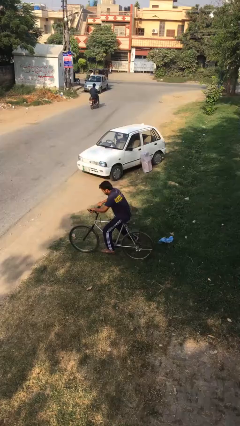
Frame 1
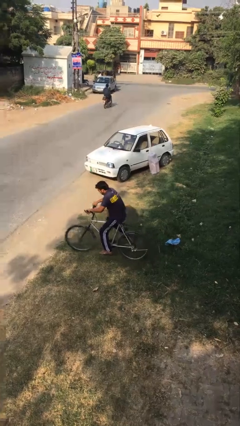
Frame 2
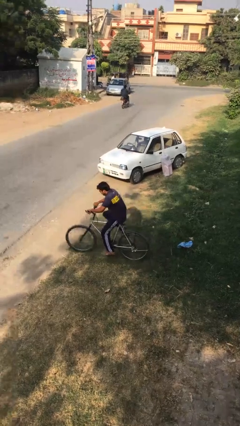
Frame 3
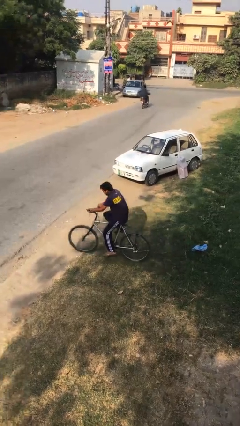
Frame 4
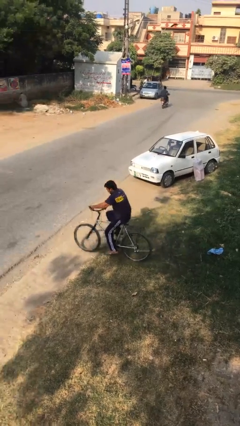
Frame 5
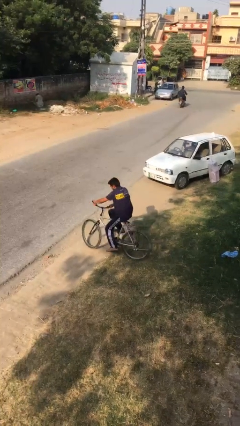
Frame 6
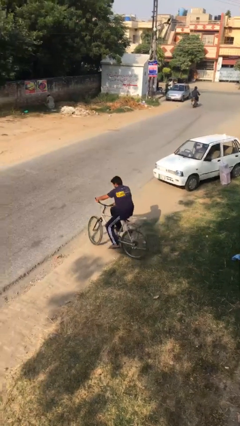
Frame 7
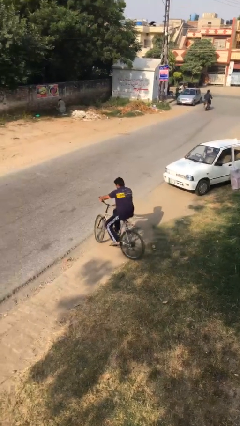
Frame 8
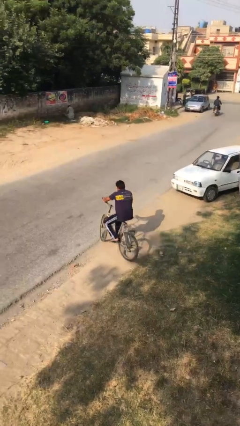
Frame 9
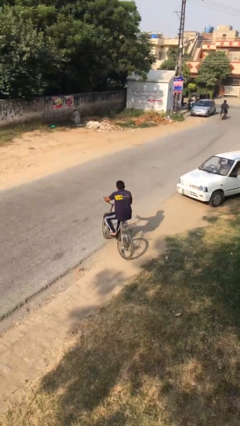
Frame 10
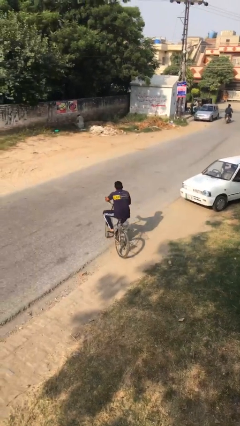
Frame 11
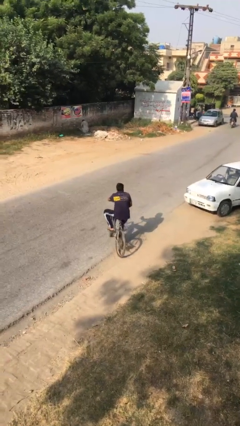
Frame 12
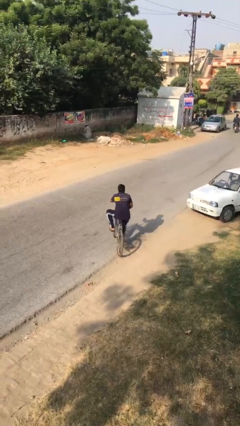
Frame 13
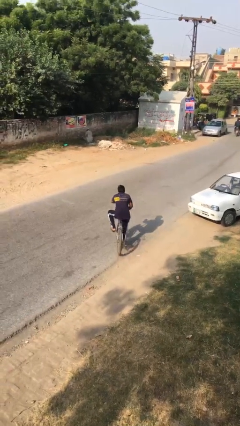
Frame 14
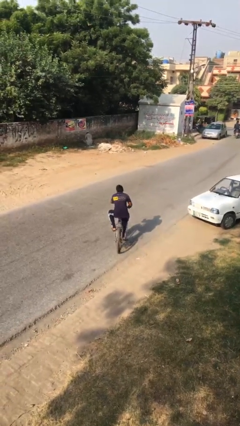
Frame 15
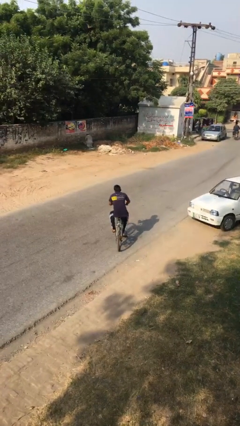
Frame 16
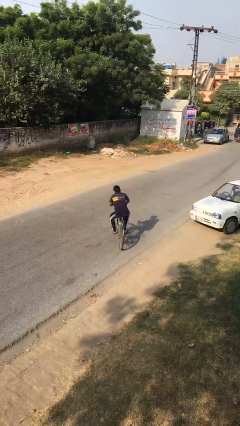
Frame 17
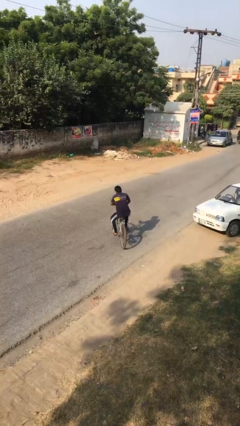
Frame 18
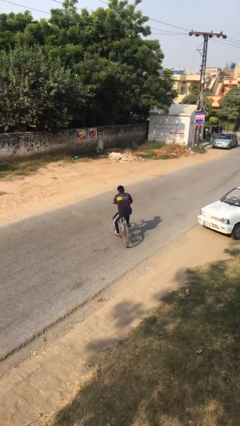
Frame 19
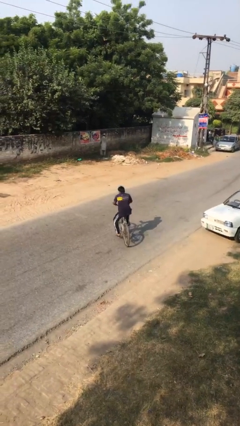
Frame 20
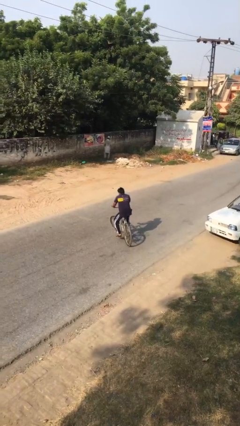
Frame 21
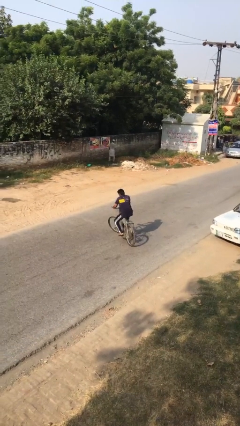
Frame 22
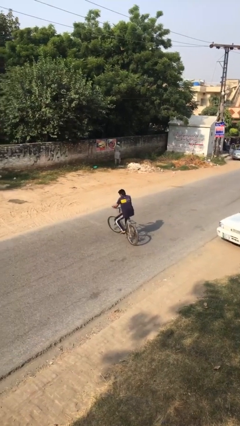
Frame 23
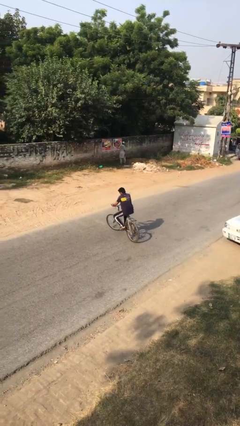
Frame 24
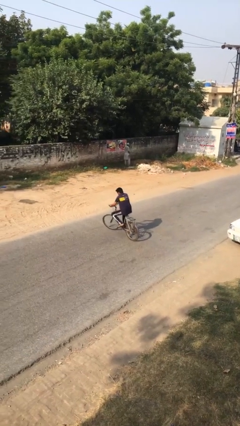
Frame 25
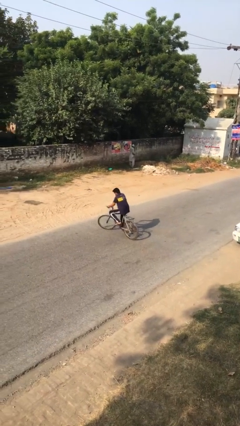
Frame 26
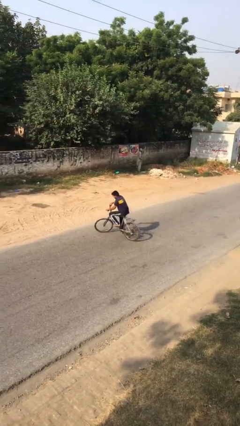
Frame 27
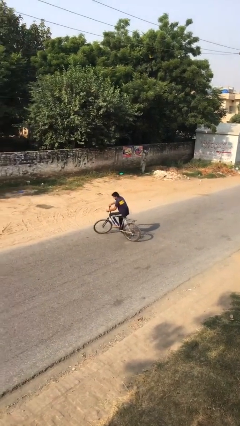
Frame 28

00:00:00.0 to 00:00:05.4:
person rides bicycle

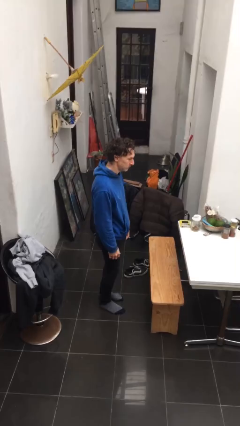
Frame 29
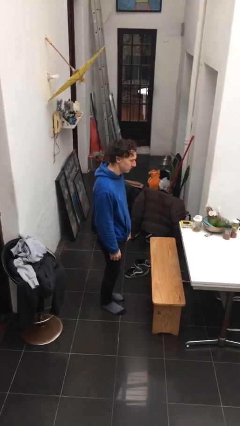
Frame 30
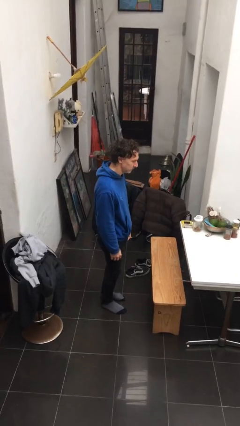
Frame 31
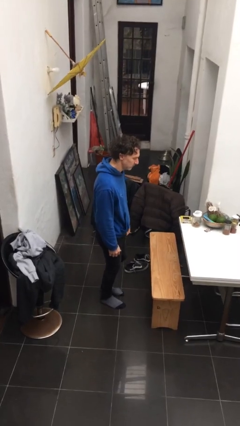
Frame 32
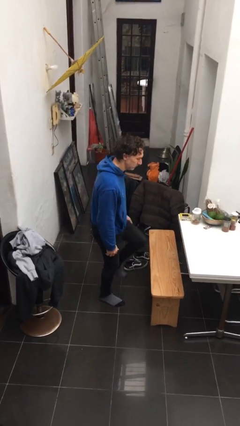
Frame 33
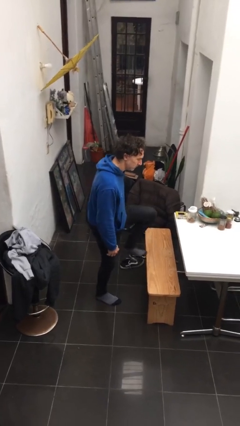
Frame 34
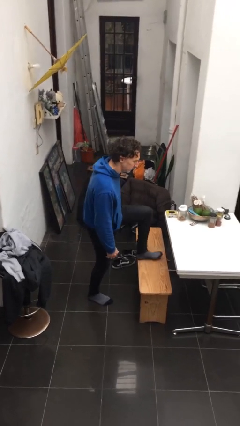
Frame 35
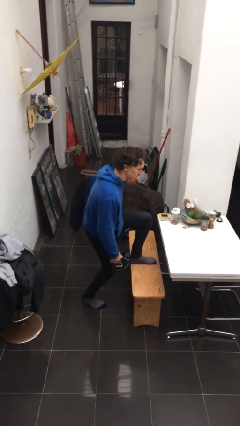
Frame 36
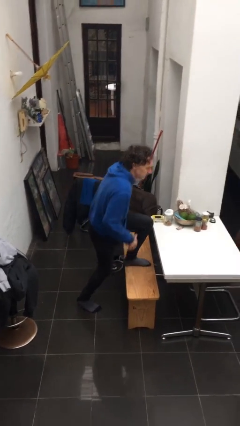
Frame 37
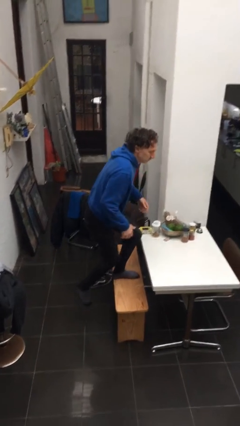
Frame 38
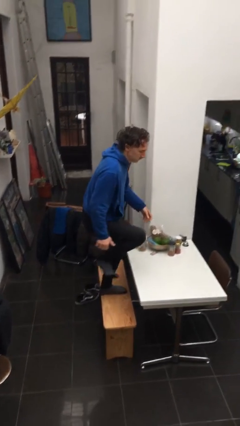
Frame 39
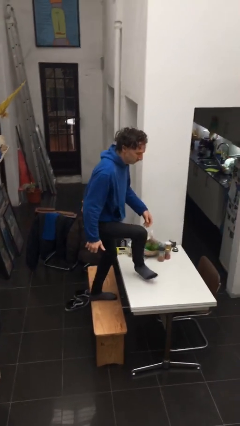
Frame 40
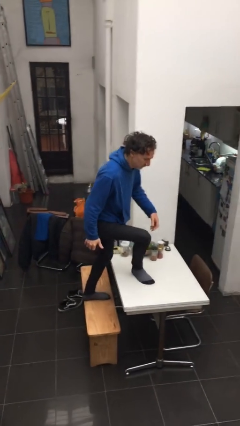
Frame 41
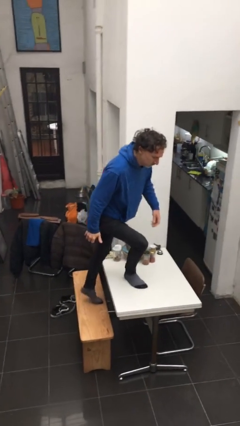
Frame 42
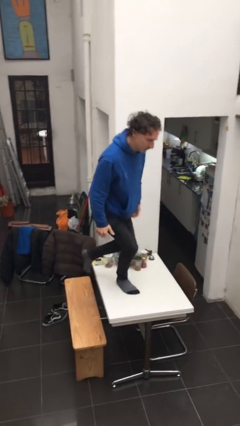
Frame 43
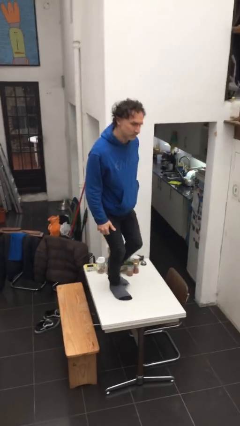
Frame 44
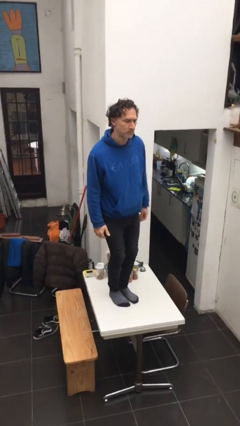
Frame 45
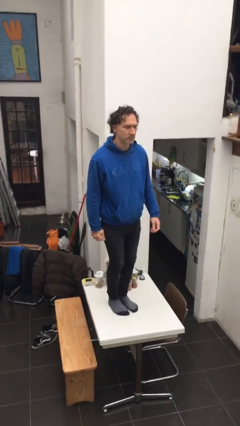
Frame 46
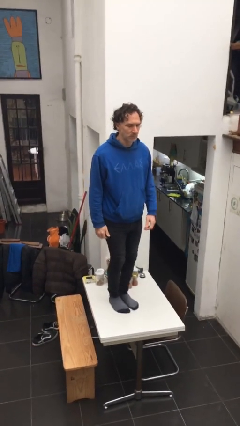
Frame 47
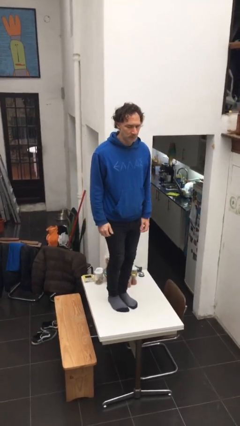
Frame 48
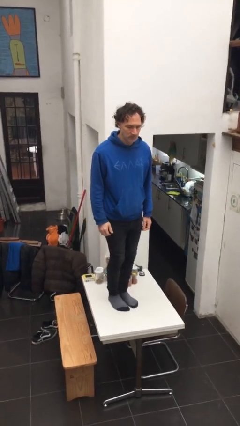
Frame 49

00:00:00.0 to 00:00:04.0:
person climbs on table

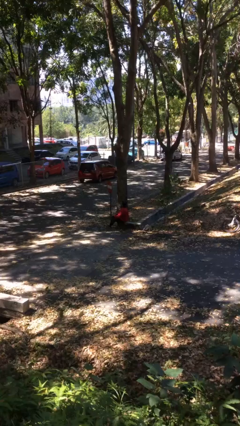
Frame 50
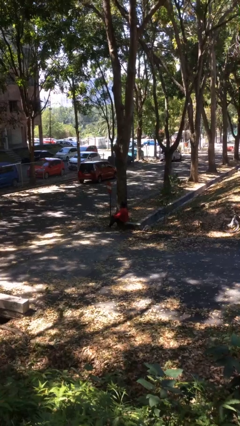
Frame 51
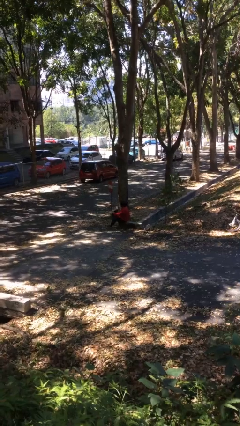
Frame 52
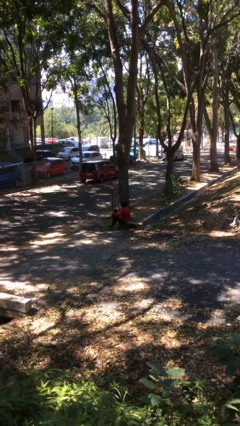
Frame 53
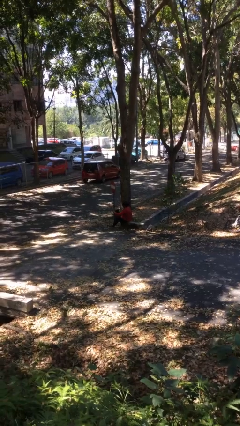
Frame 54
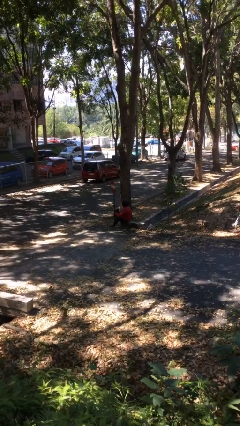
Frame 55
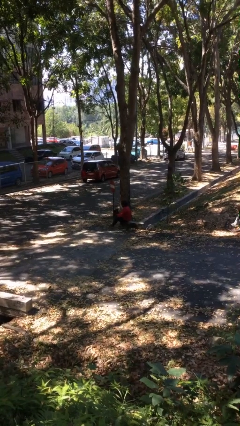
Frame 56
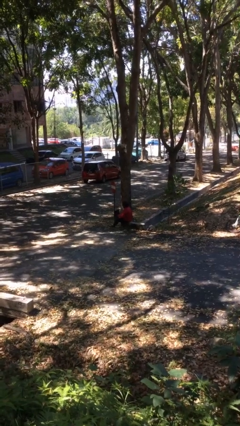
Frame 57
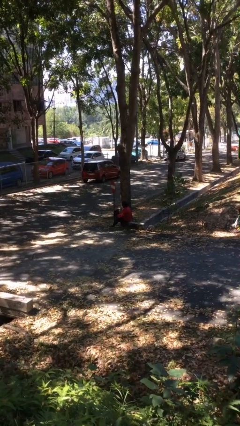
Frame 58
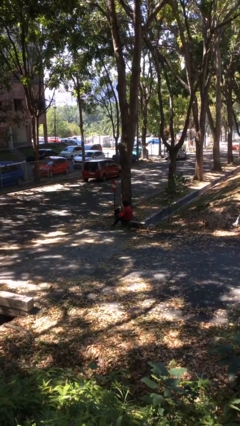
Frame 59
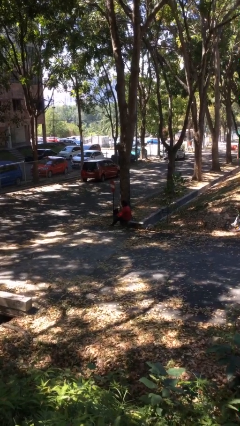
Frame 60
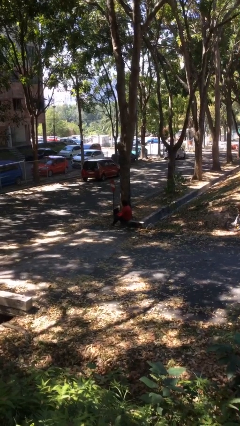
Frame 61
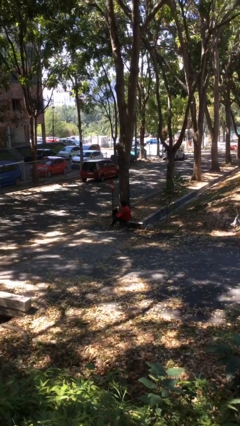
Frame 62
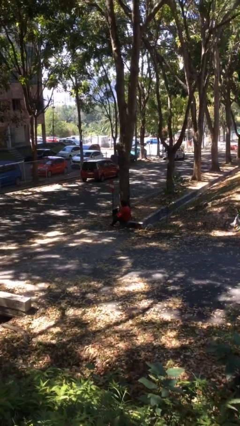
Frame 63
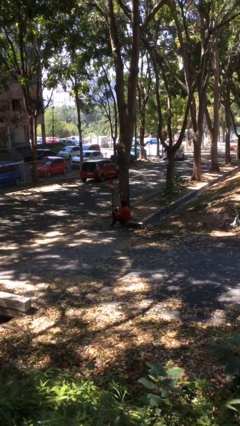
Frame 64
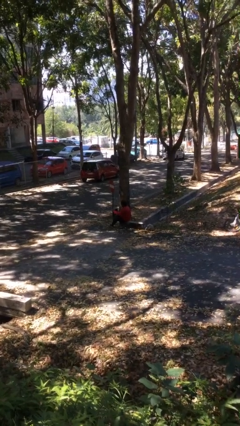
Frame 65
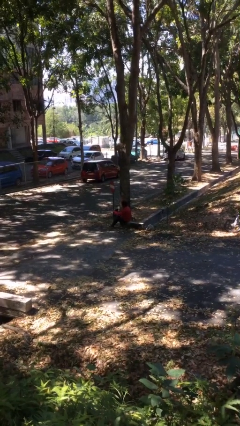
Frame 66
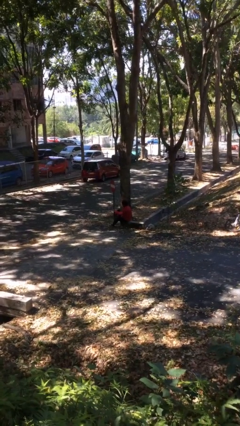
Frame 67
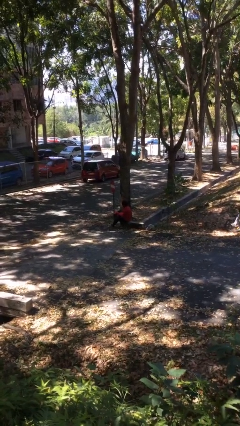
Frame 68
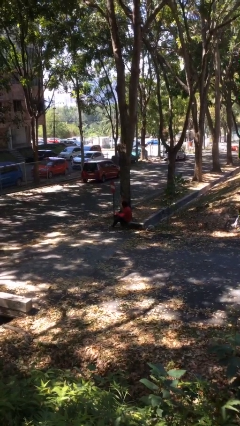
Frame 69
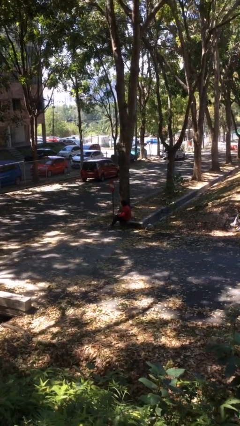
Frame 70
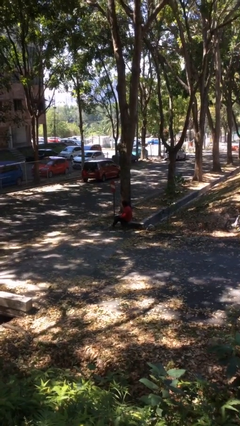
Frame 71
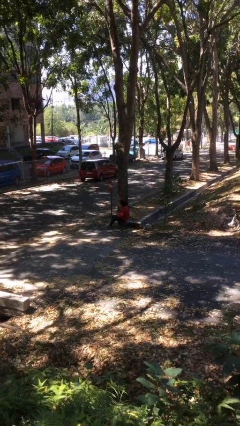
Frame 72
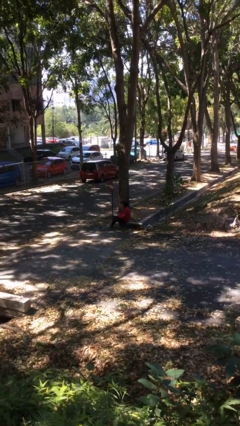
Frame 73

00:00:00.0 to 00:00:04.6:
person interacts with laptop

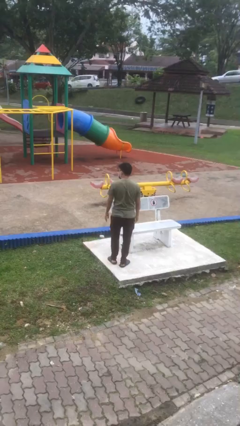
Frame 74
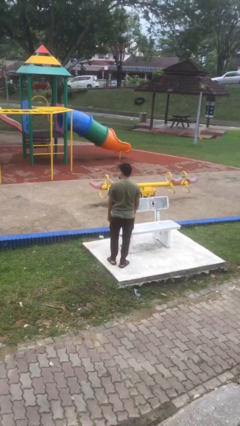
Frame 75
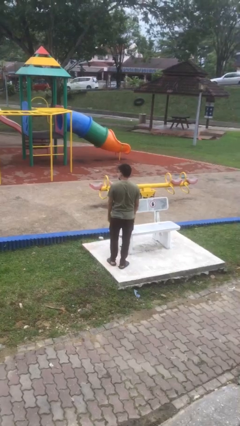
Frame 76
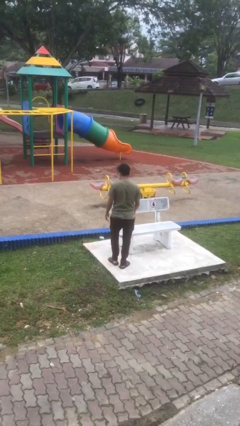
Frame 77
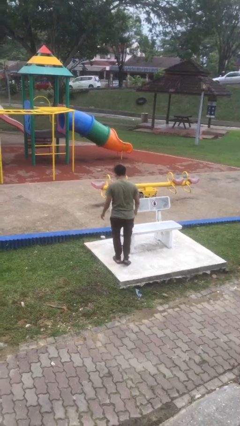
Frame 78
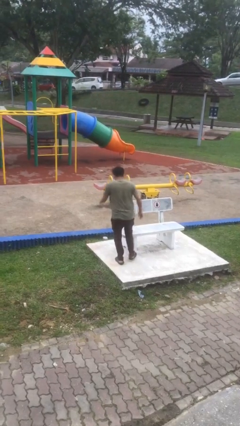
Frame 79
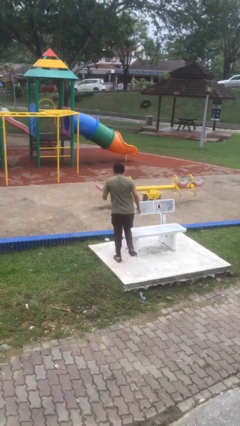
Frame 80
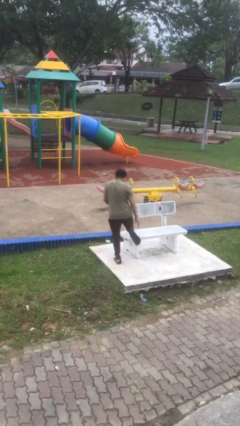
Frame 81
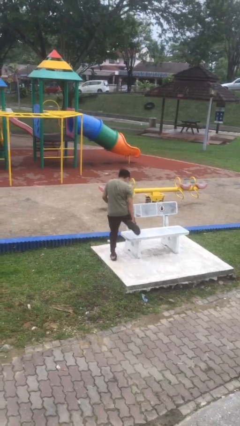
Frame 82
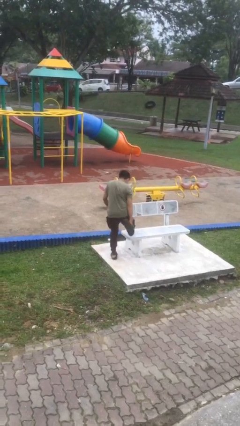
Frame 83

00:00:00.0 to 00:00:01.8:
person stubs toe

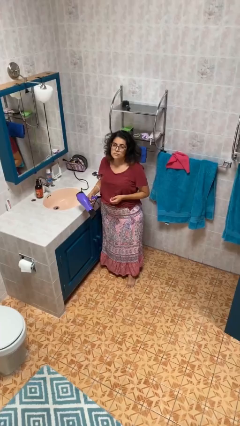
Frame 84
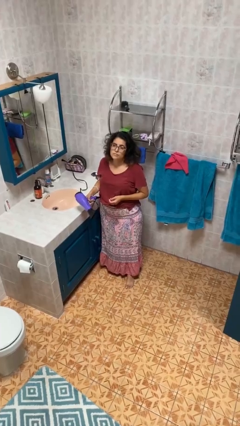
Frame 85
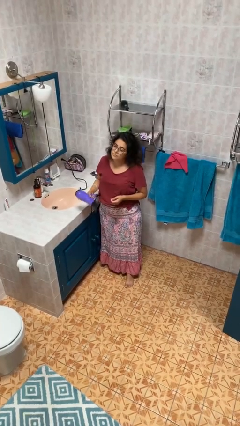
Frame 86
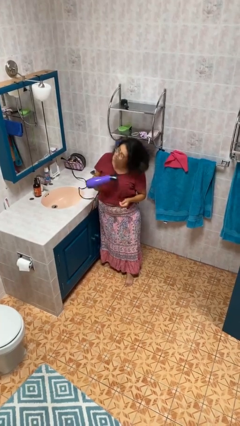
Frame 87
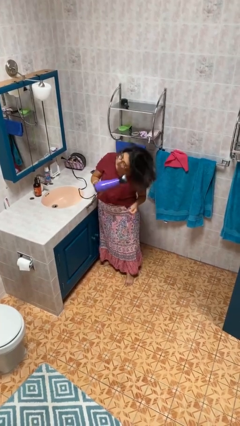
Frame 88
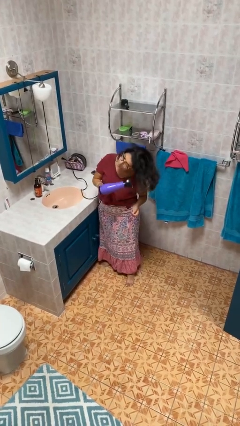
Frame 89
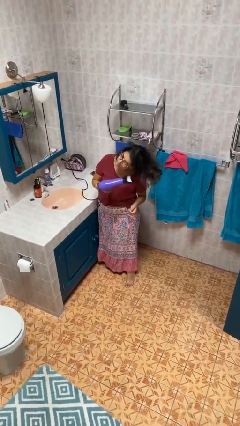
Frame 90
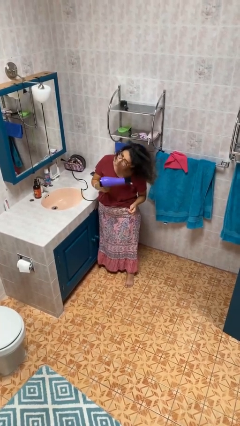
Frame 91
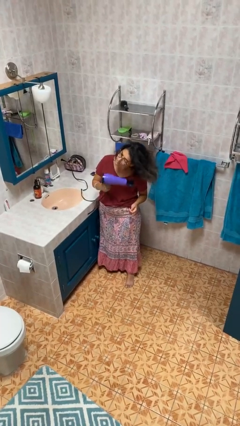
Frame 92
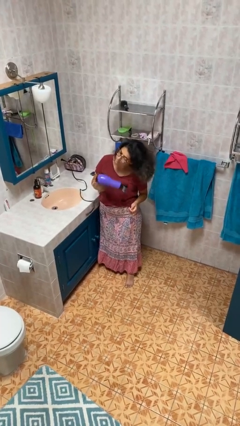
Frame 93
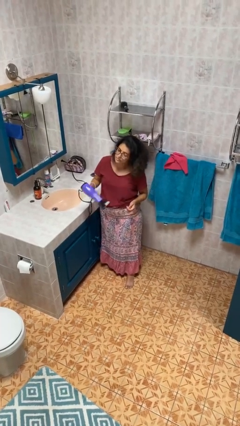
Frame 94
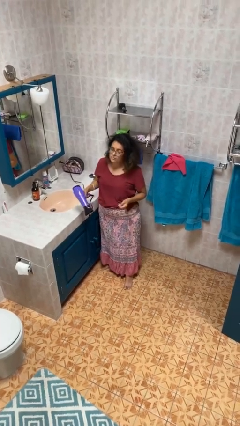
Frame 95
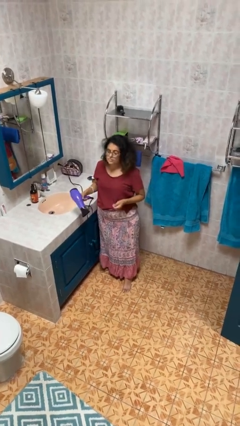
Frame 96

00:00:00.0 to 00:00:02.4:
person dries hair with hairdryer
